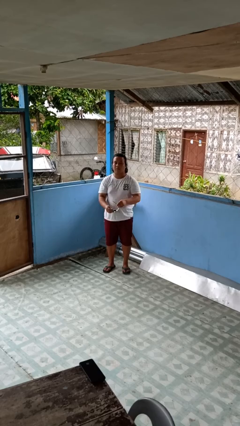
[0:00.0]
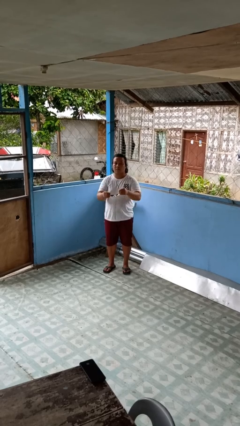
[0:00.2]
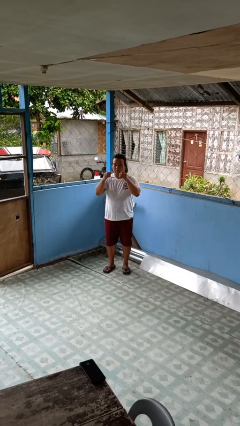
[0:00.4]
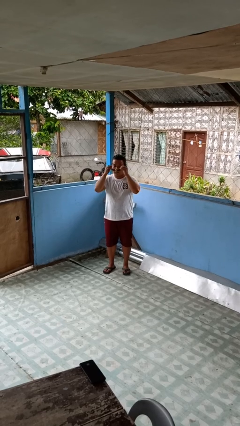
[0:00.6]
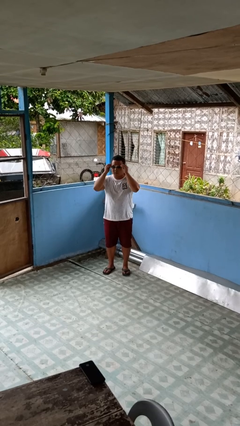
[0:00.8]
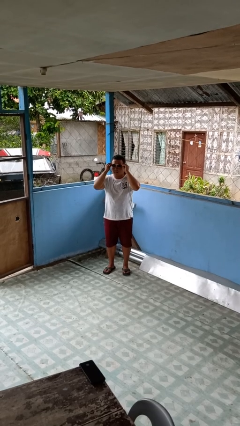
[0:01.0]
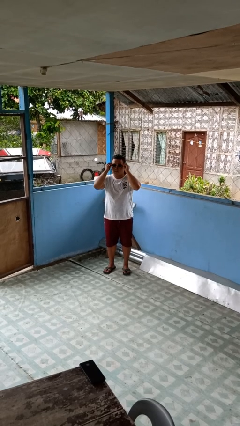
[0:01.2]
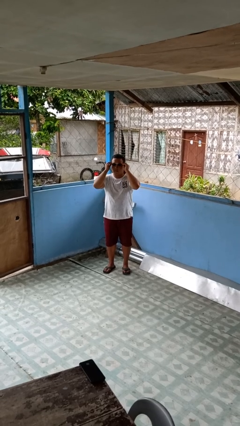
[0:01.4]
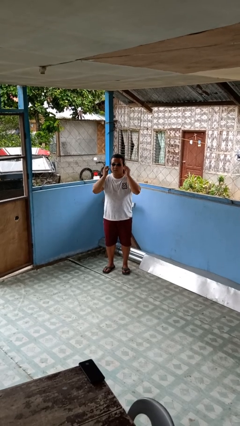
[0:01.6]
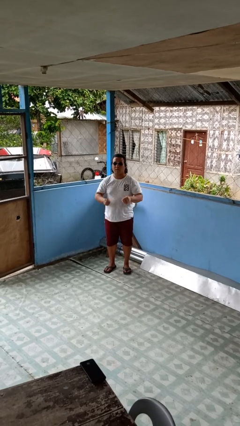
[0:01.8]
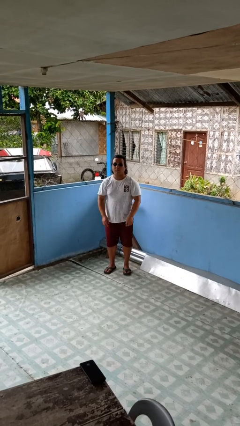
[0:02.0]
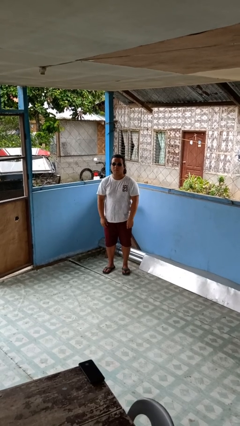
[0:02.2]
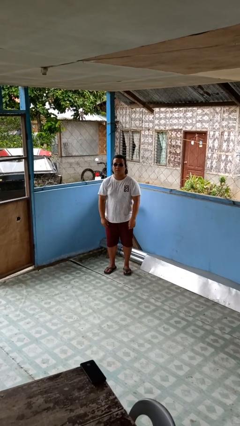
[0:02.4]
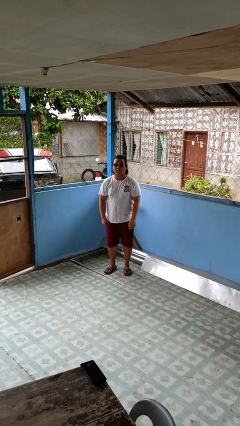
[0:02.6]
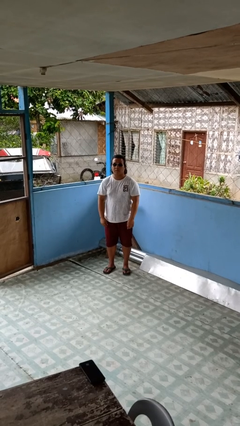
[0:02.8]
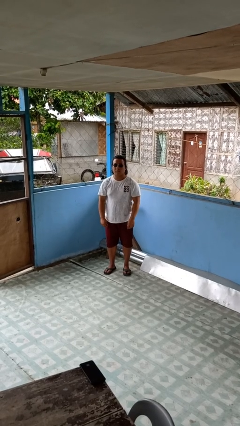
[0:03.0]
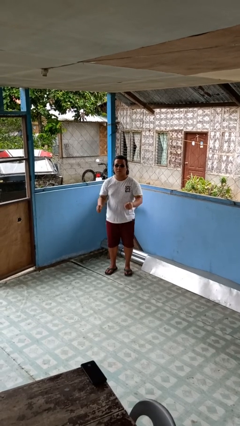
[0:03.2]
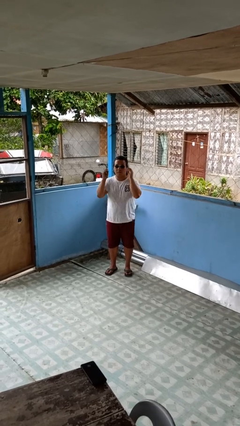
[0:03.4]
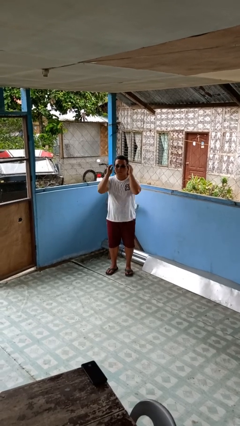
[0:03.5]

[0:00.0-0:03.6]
person puts on sunglasses

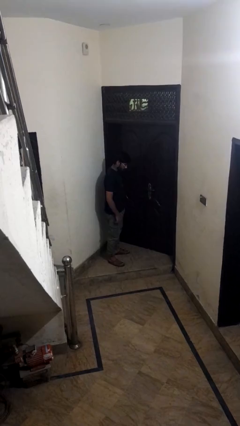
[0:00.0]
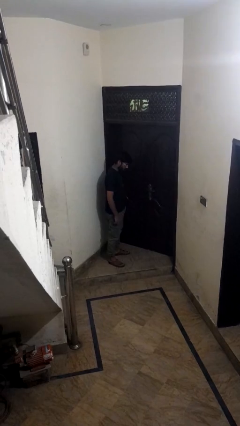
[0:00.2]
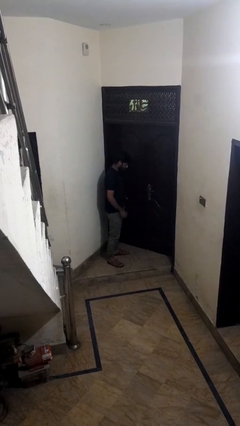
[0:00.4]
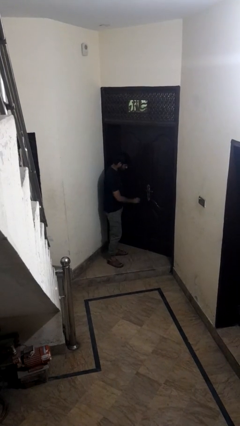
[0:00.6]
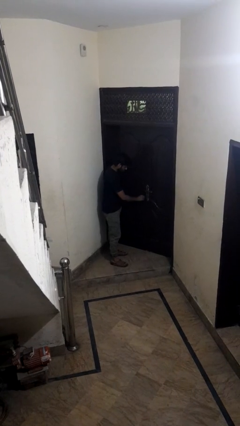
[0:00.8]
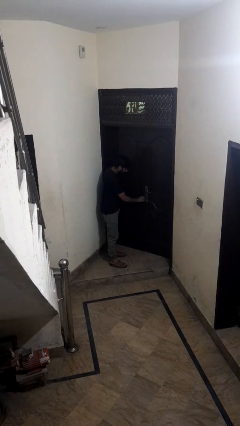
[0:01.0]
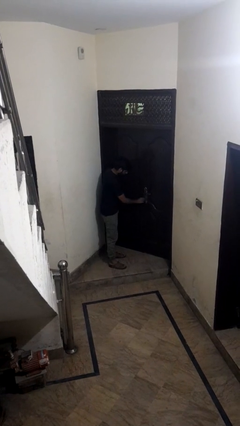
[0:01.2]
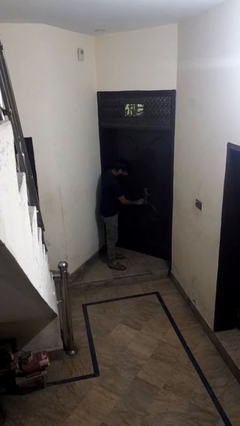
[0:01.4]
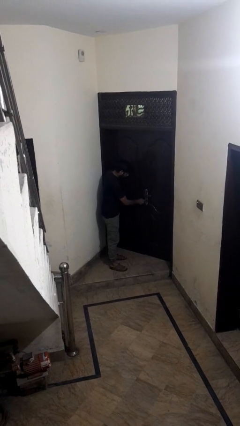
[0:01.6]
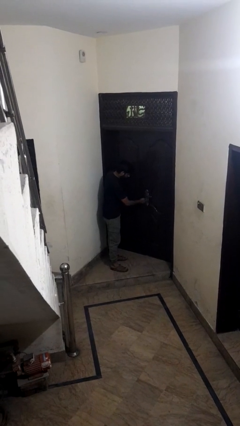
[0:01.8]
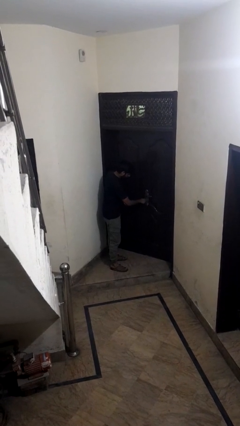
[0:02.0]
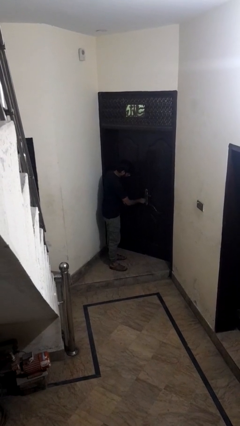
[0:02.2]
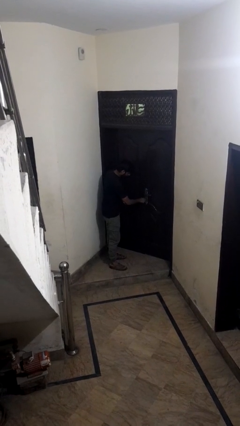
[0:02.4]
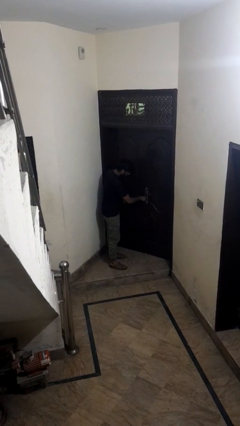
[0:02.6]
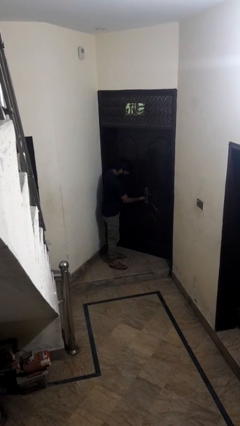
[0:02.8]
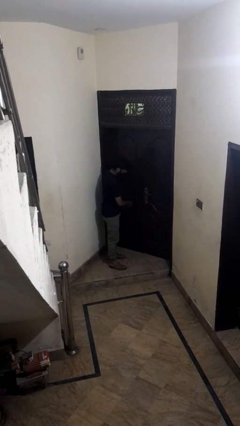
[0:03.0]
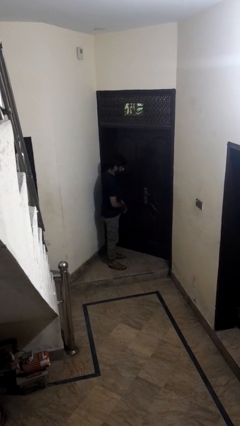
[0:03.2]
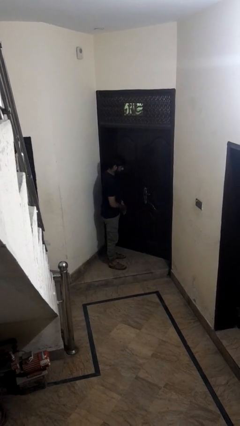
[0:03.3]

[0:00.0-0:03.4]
person unlocks door with keys

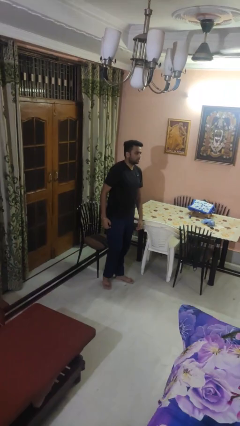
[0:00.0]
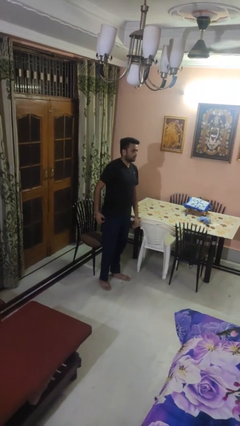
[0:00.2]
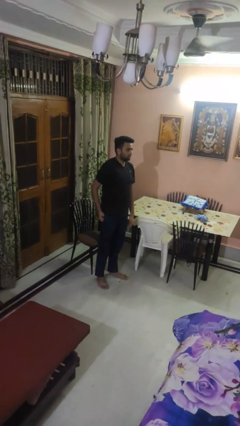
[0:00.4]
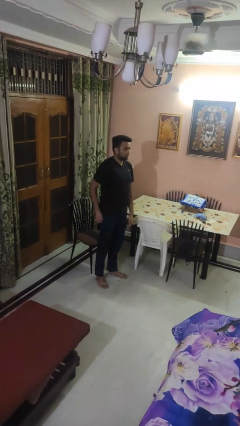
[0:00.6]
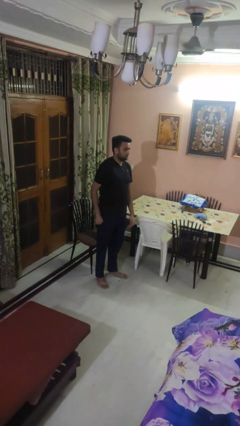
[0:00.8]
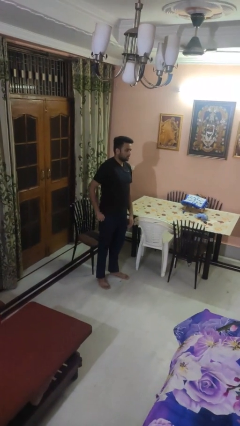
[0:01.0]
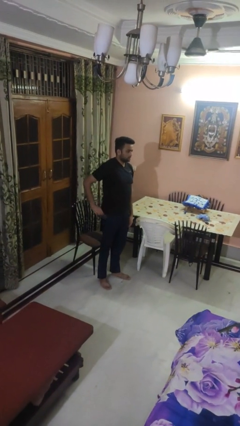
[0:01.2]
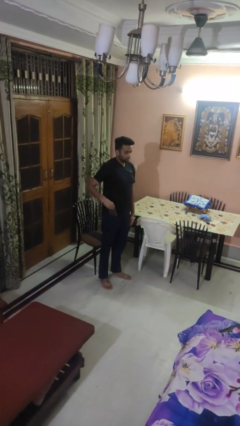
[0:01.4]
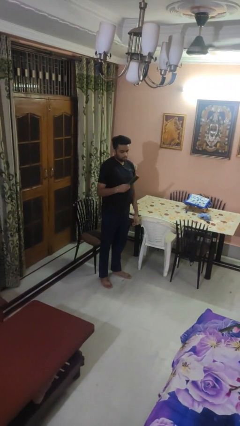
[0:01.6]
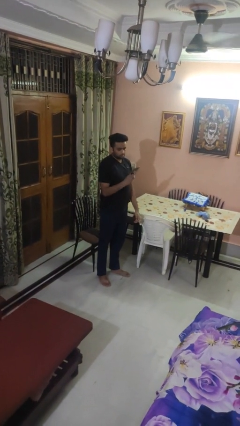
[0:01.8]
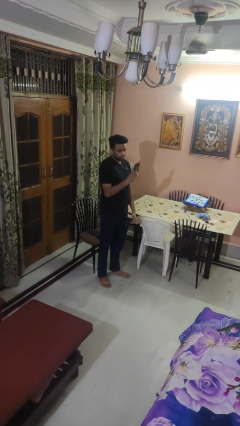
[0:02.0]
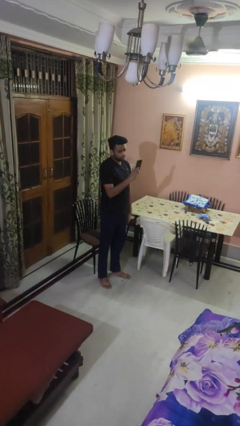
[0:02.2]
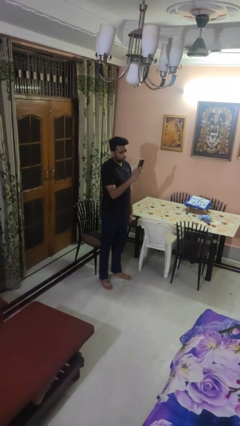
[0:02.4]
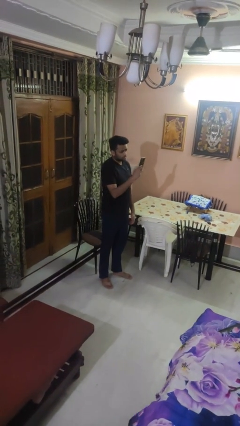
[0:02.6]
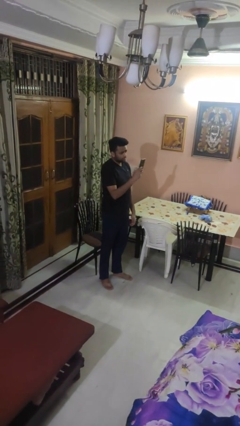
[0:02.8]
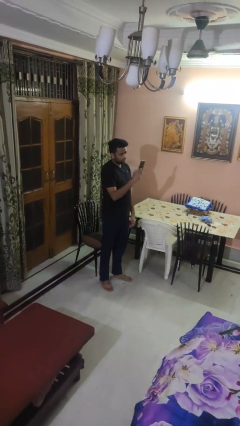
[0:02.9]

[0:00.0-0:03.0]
person takes phone from pocket

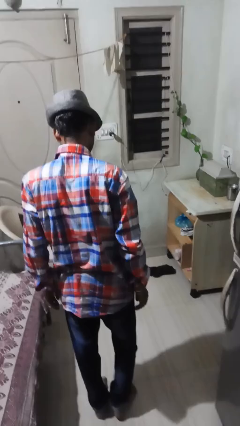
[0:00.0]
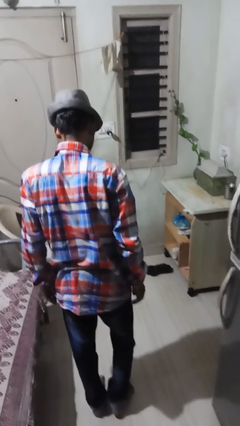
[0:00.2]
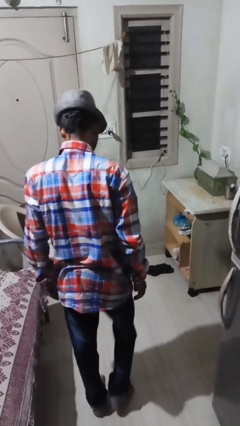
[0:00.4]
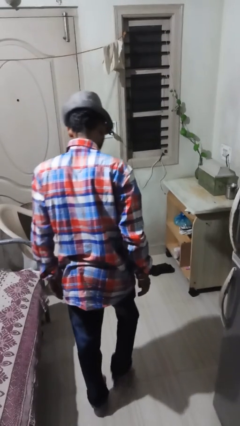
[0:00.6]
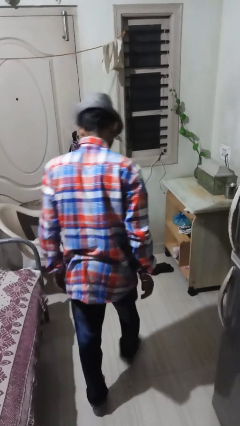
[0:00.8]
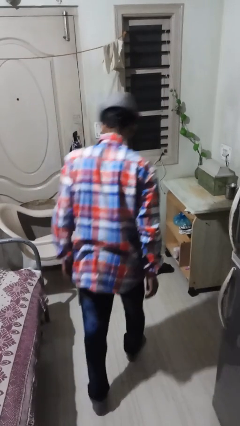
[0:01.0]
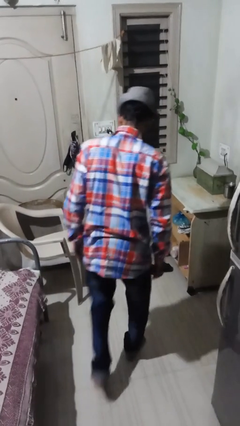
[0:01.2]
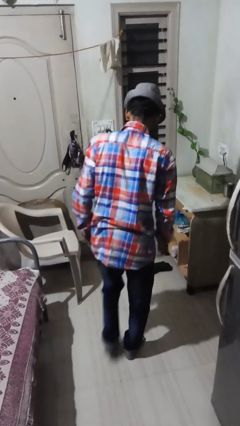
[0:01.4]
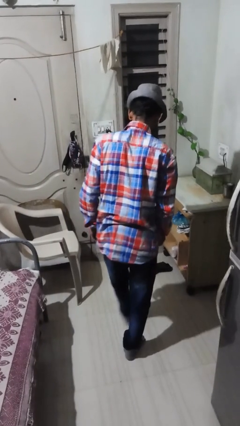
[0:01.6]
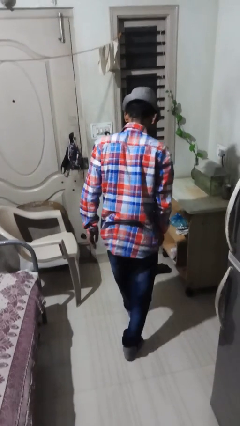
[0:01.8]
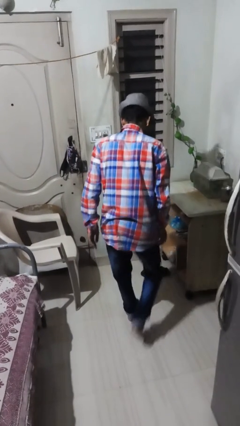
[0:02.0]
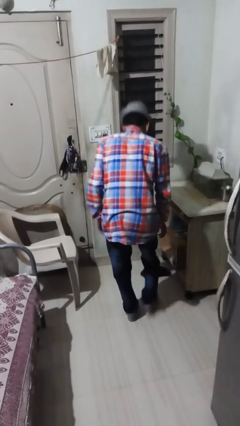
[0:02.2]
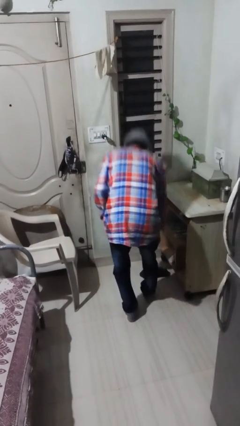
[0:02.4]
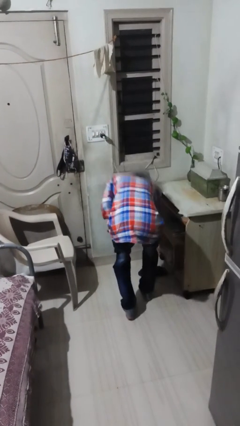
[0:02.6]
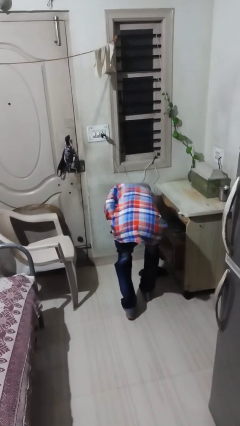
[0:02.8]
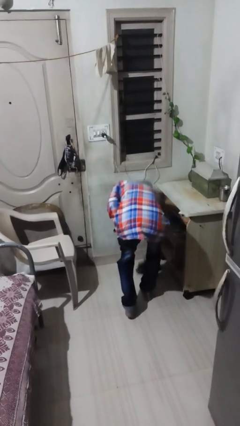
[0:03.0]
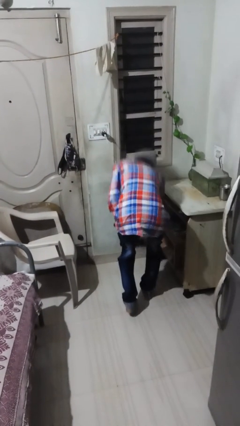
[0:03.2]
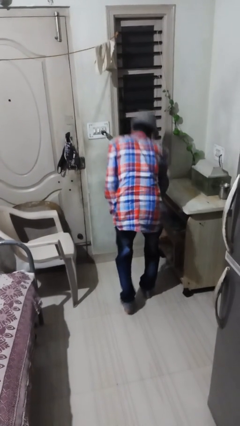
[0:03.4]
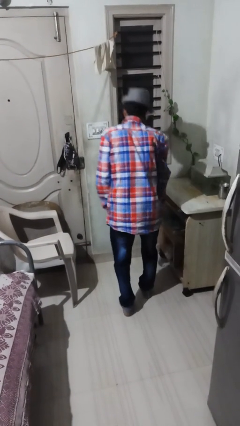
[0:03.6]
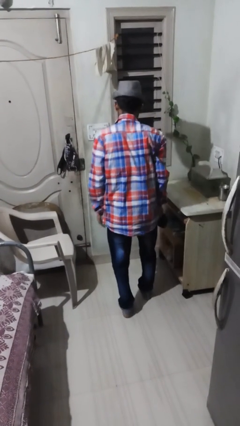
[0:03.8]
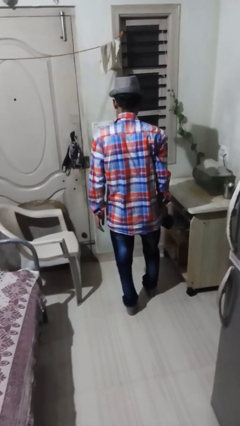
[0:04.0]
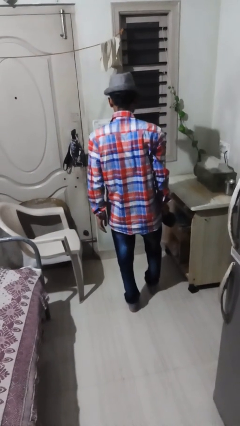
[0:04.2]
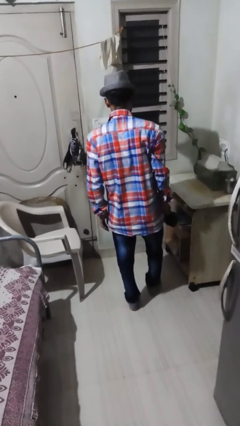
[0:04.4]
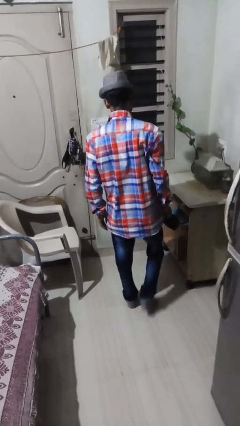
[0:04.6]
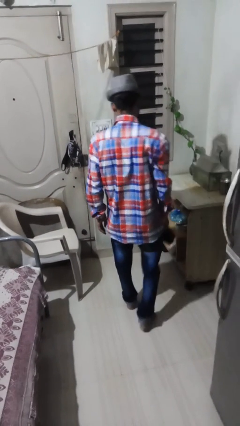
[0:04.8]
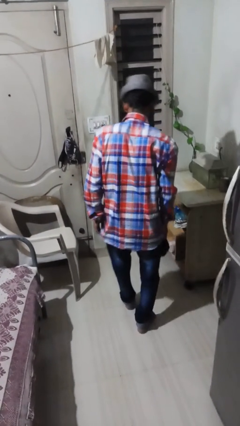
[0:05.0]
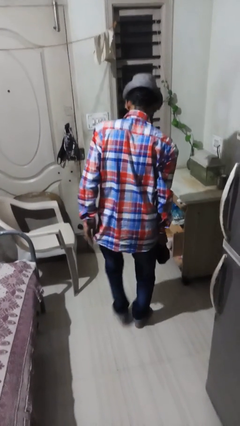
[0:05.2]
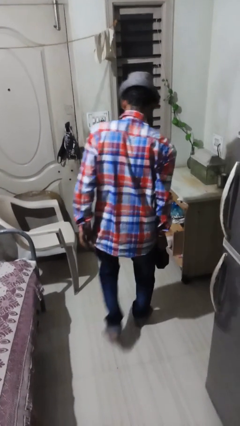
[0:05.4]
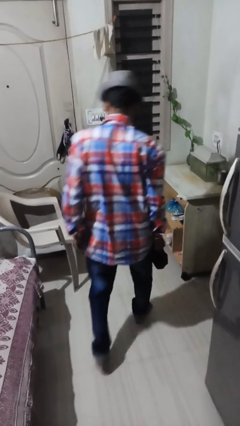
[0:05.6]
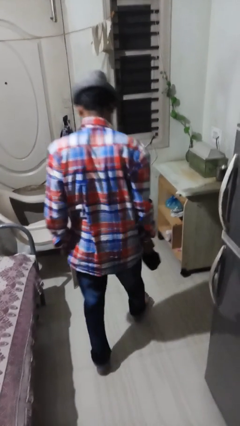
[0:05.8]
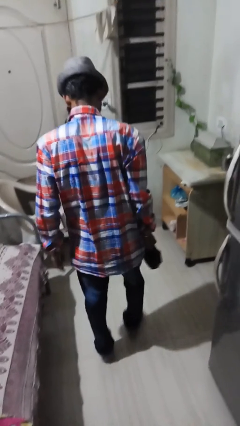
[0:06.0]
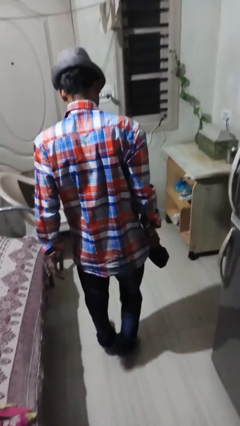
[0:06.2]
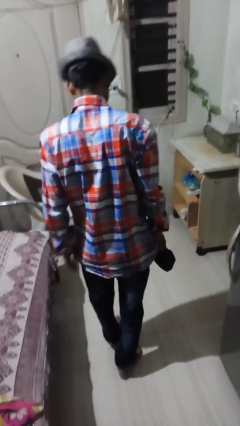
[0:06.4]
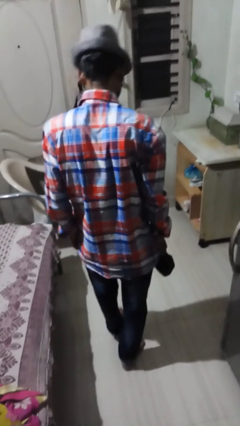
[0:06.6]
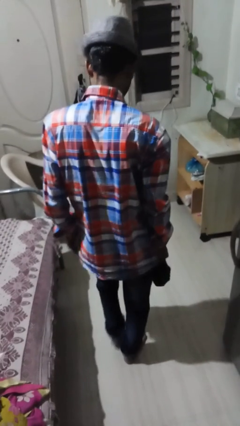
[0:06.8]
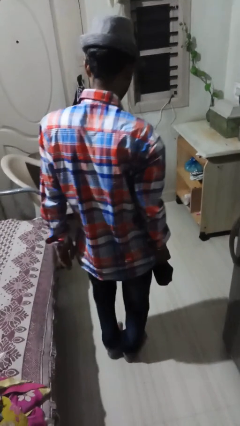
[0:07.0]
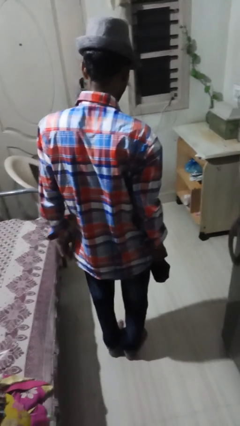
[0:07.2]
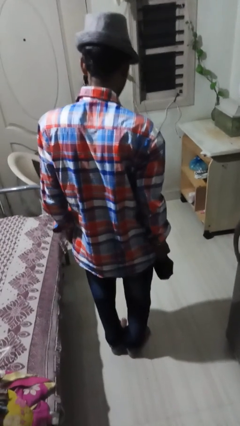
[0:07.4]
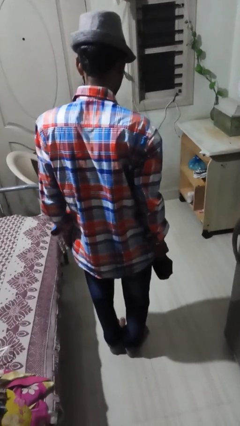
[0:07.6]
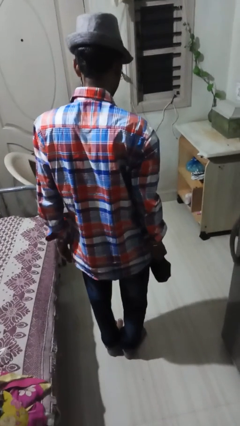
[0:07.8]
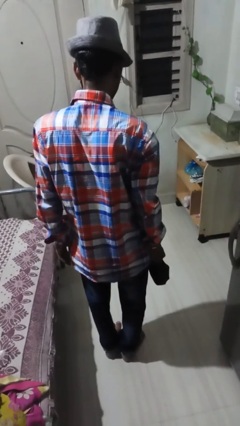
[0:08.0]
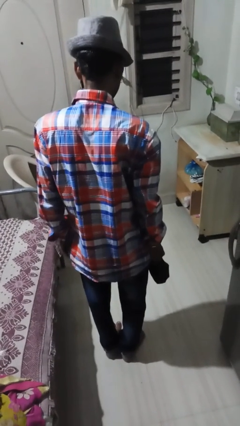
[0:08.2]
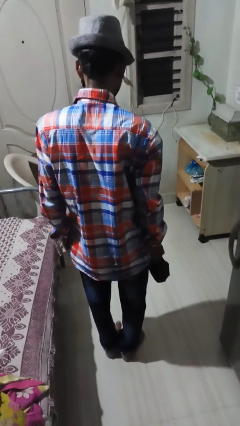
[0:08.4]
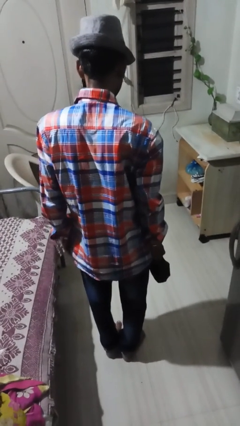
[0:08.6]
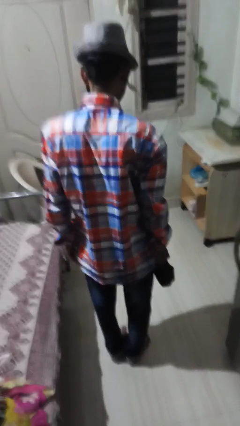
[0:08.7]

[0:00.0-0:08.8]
person picks up object from floor
